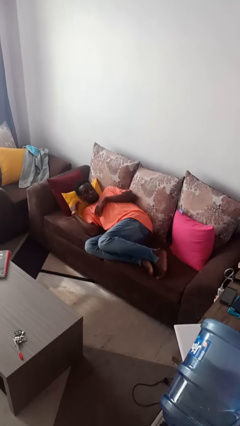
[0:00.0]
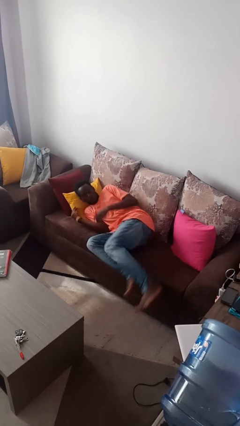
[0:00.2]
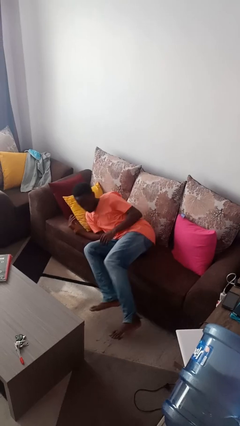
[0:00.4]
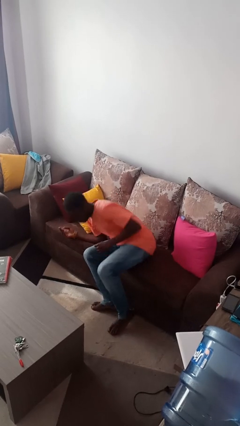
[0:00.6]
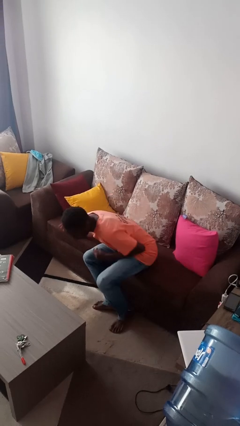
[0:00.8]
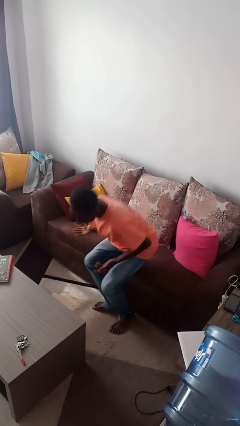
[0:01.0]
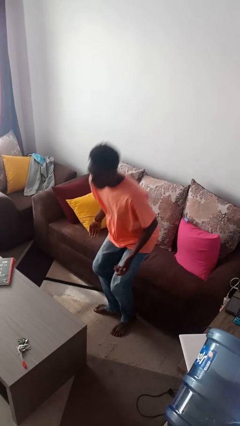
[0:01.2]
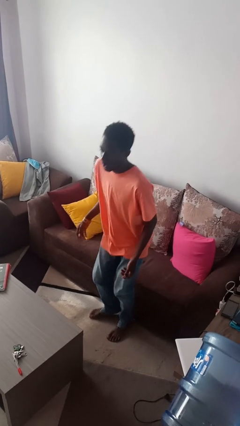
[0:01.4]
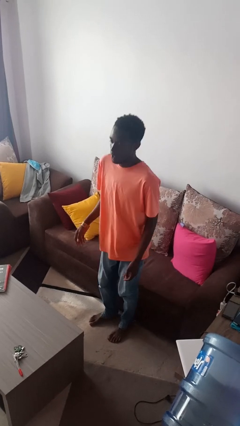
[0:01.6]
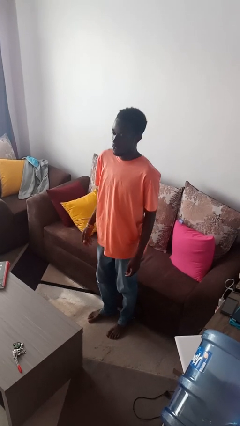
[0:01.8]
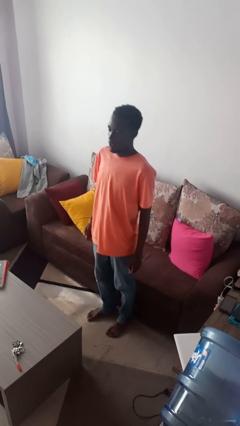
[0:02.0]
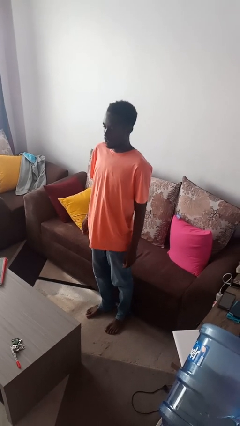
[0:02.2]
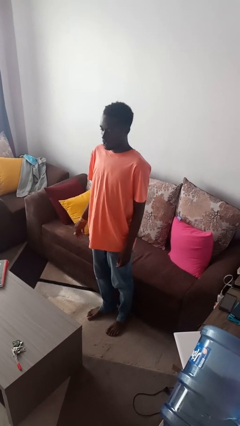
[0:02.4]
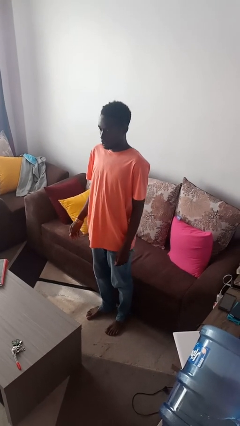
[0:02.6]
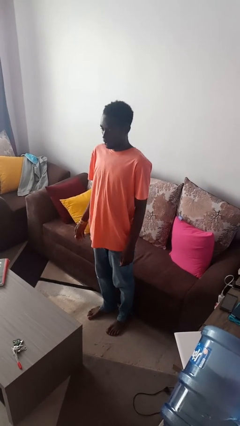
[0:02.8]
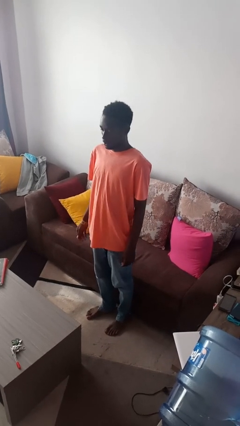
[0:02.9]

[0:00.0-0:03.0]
person stands up

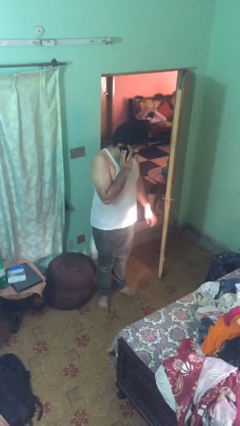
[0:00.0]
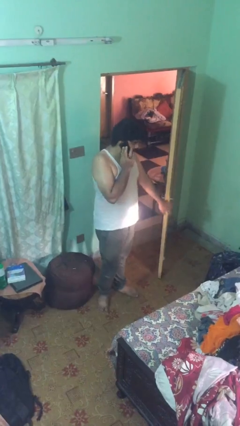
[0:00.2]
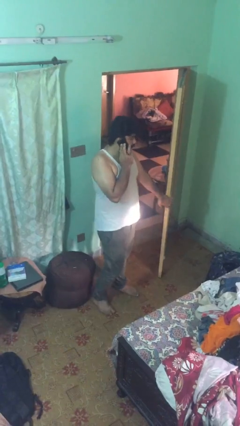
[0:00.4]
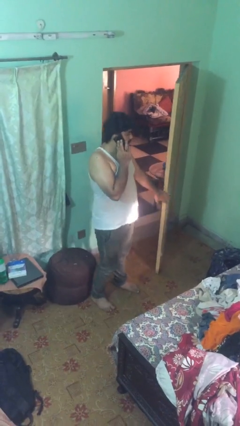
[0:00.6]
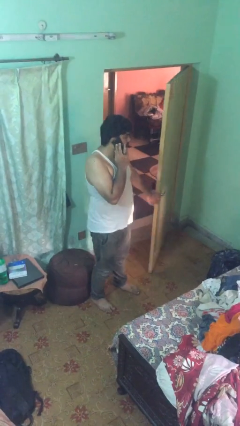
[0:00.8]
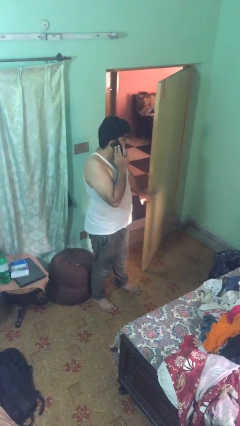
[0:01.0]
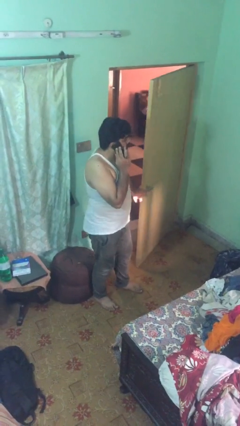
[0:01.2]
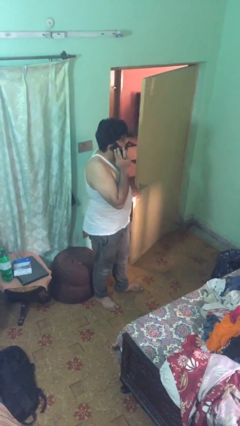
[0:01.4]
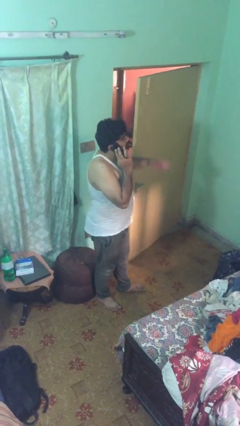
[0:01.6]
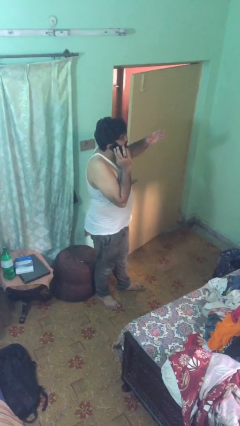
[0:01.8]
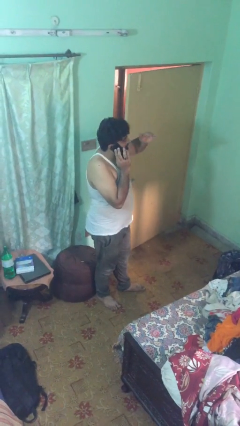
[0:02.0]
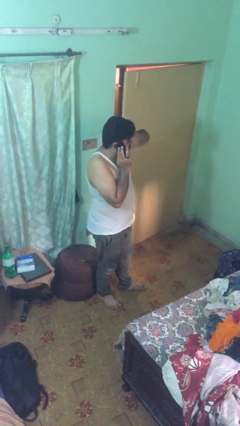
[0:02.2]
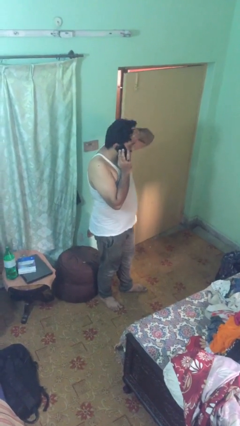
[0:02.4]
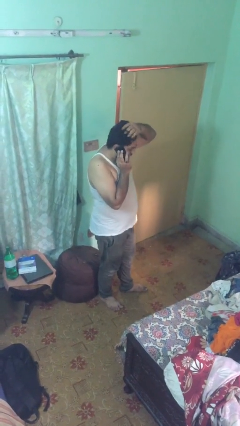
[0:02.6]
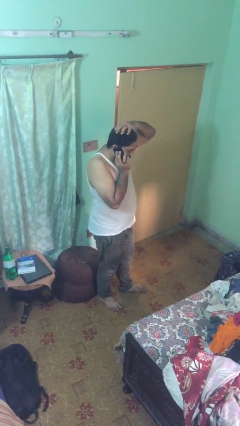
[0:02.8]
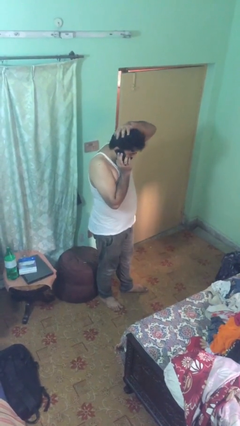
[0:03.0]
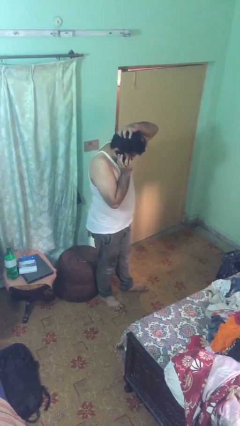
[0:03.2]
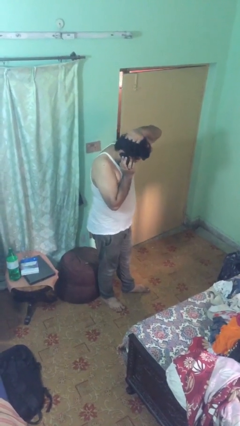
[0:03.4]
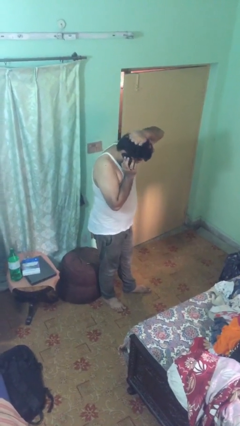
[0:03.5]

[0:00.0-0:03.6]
person closes facility door

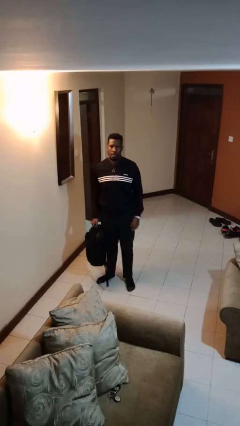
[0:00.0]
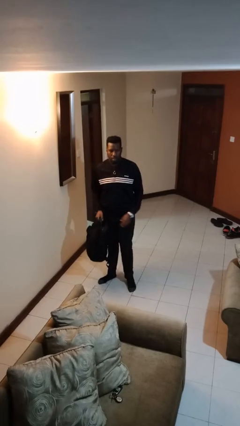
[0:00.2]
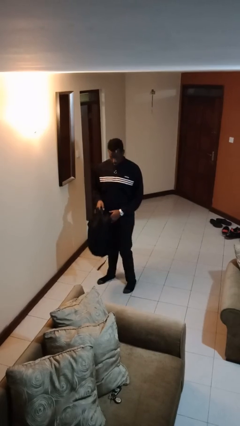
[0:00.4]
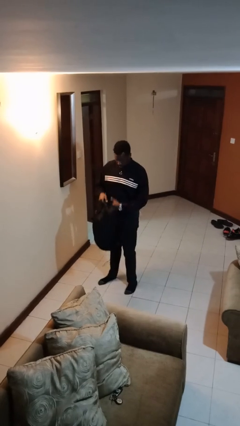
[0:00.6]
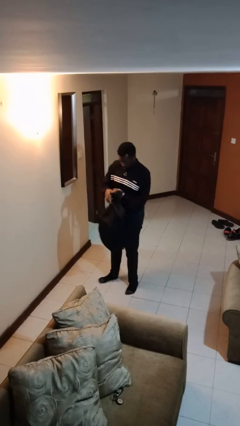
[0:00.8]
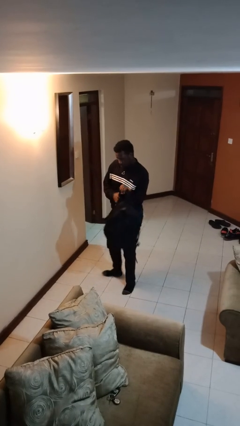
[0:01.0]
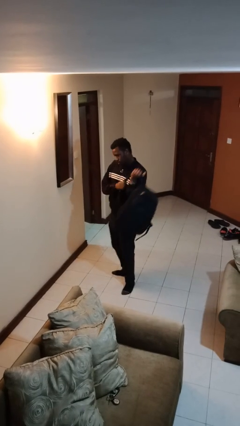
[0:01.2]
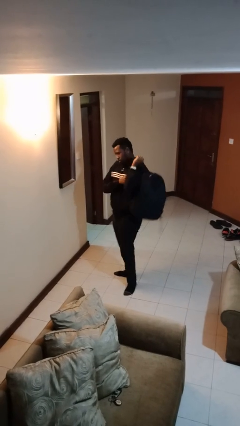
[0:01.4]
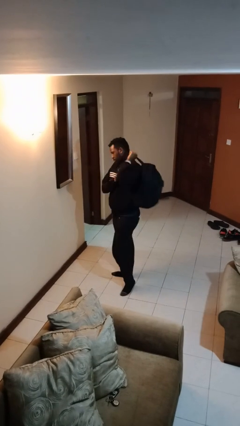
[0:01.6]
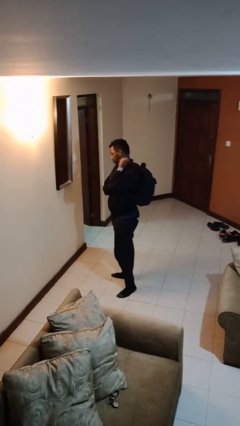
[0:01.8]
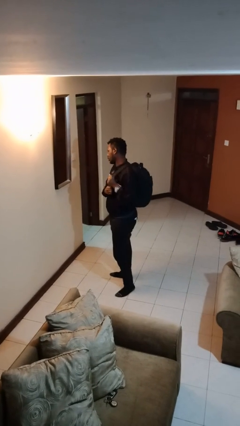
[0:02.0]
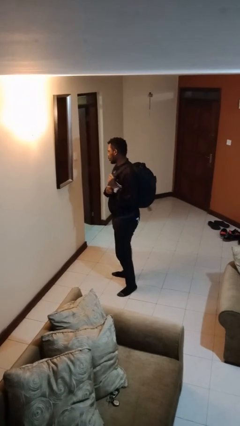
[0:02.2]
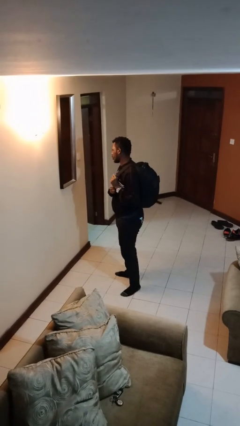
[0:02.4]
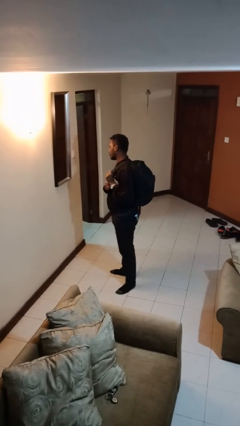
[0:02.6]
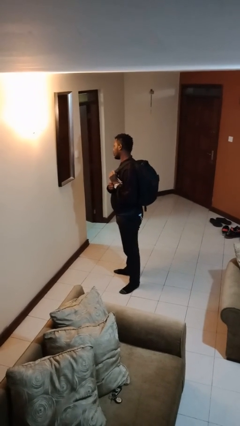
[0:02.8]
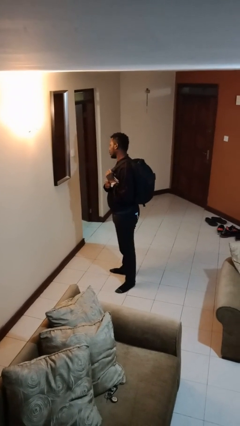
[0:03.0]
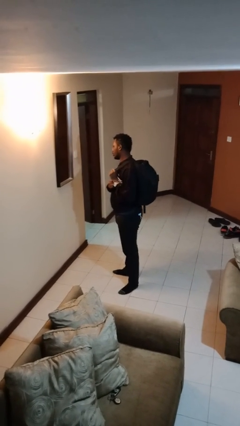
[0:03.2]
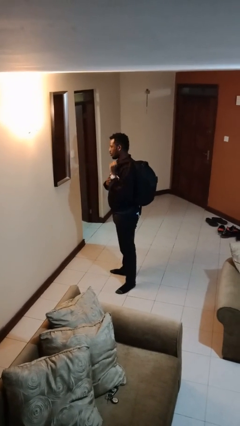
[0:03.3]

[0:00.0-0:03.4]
person puts on backpack

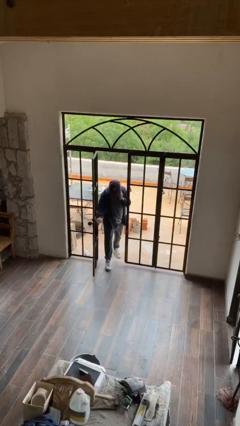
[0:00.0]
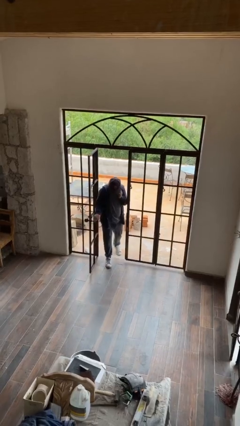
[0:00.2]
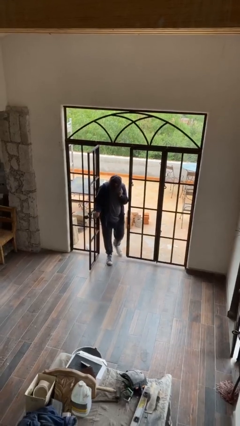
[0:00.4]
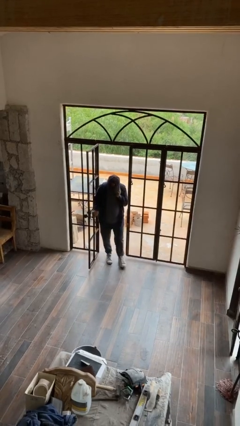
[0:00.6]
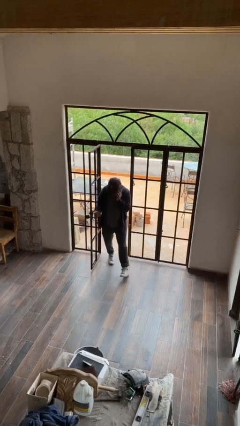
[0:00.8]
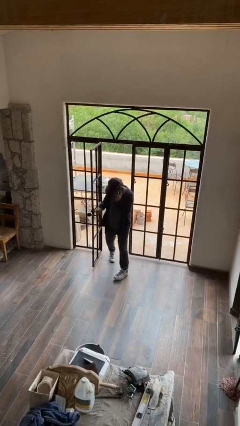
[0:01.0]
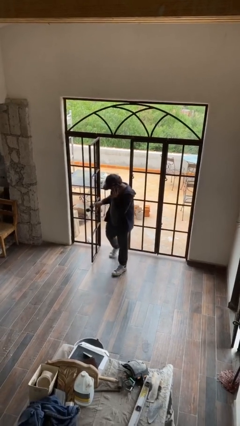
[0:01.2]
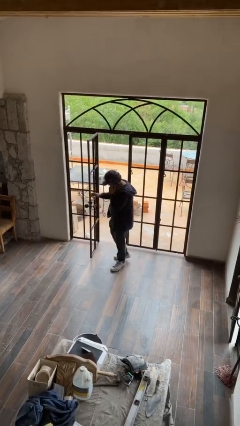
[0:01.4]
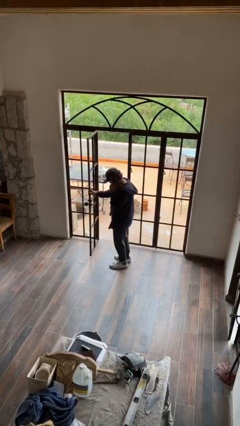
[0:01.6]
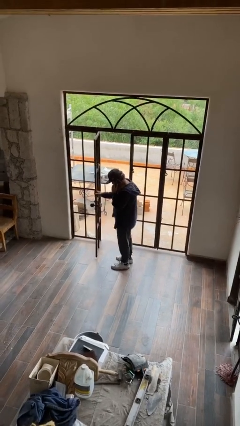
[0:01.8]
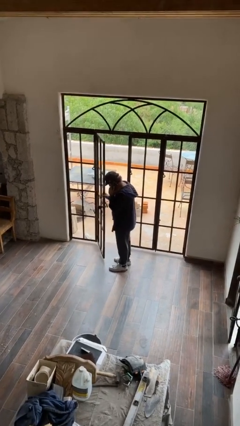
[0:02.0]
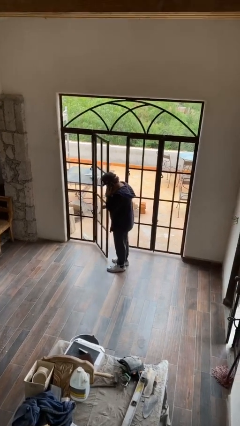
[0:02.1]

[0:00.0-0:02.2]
person enters scene through structure

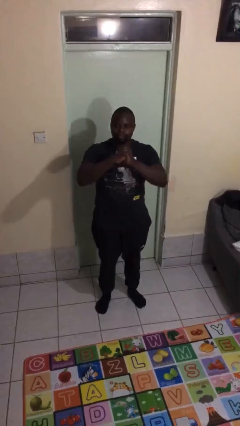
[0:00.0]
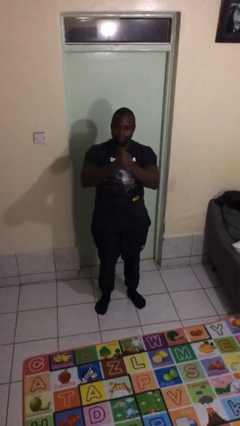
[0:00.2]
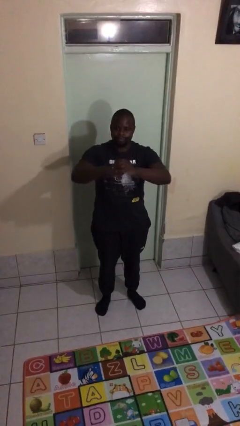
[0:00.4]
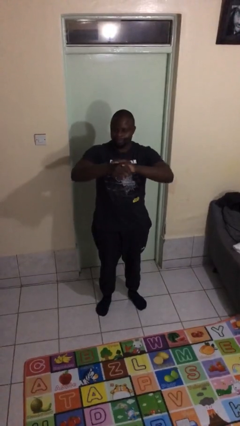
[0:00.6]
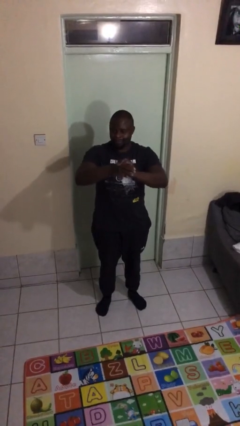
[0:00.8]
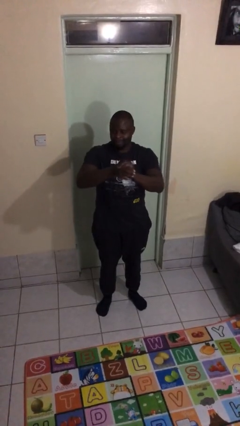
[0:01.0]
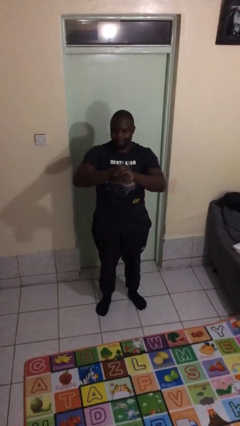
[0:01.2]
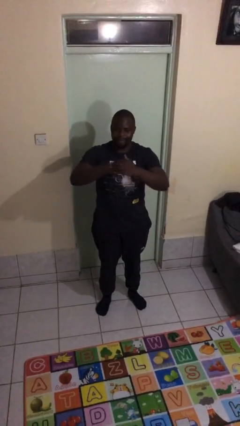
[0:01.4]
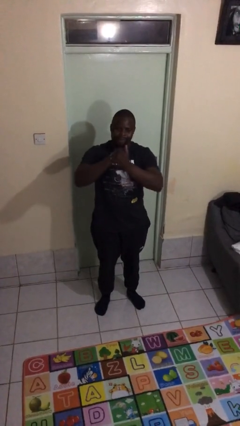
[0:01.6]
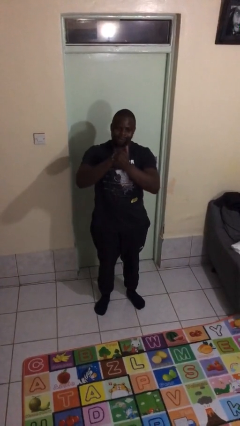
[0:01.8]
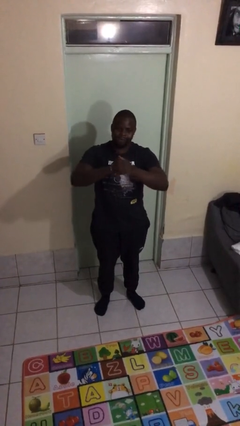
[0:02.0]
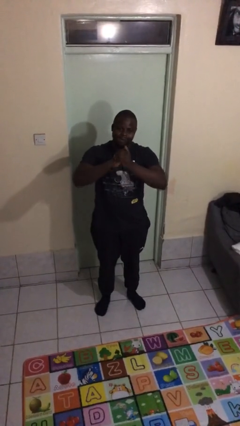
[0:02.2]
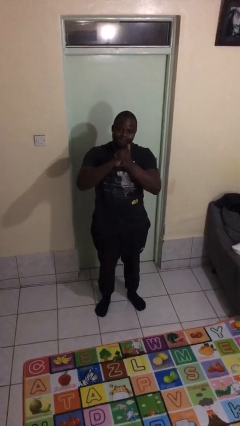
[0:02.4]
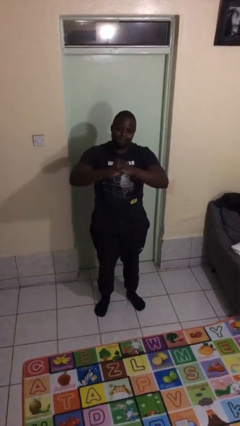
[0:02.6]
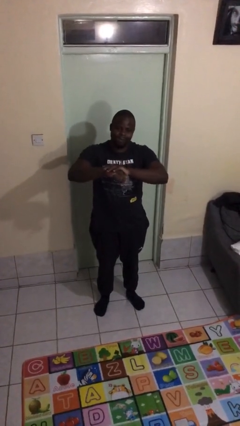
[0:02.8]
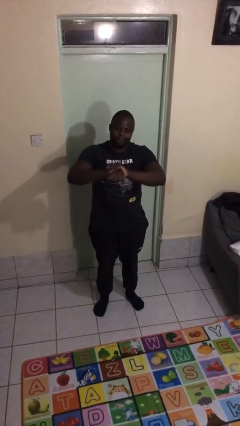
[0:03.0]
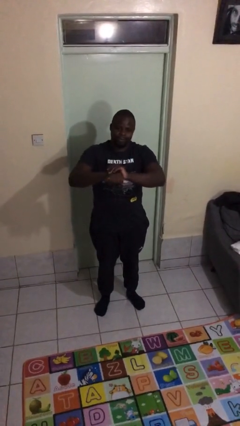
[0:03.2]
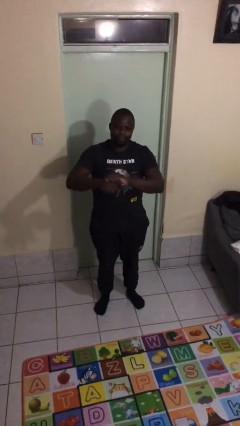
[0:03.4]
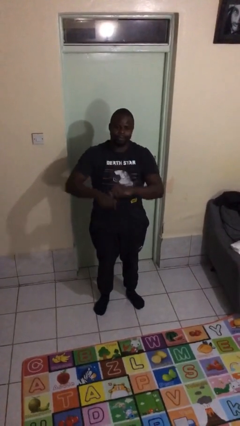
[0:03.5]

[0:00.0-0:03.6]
person cracks knuckles

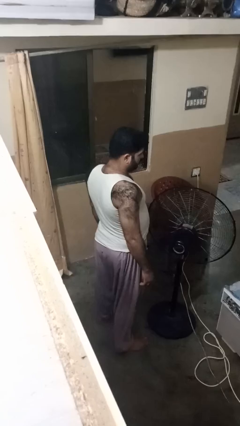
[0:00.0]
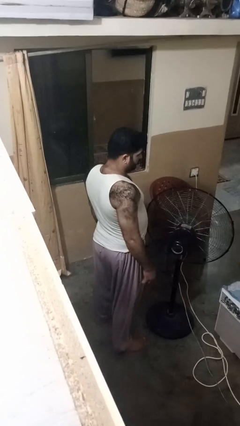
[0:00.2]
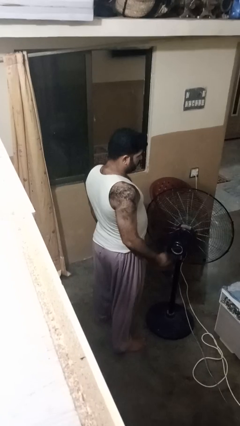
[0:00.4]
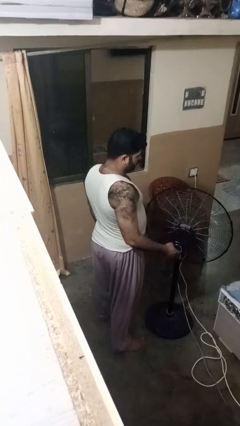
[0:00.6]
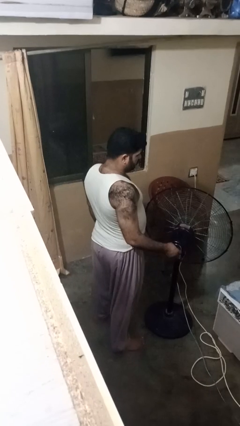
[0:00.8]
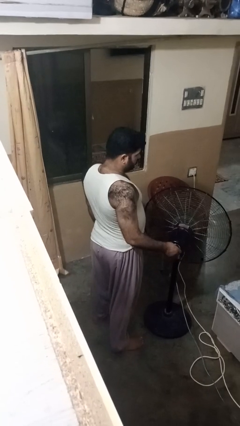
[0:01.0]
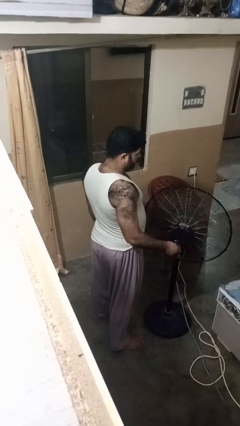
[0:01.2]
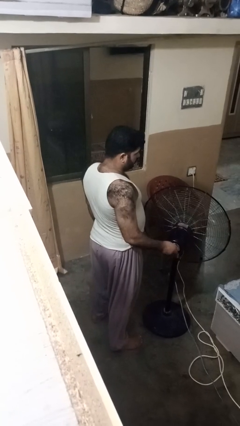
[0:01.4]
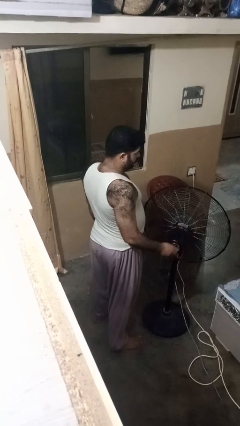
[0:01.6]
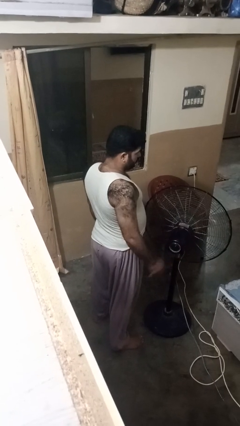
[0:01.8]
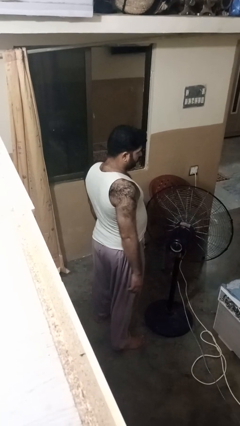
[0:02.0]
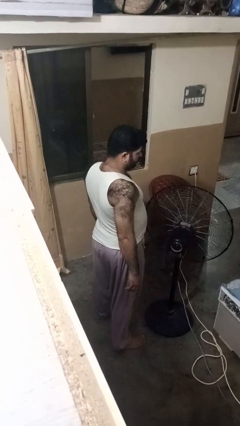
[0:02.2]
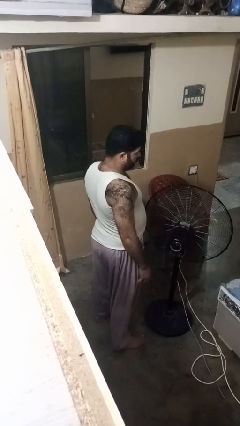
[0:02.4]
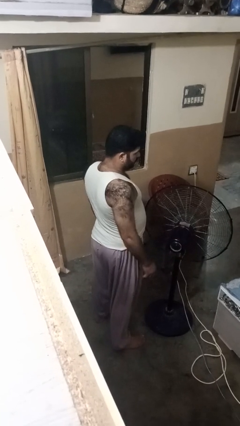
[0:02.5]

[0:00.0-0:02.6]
person turns on fan
